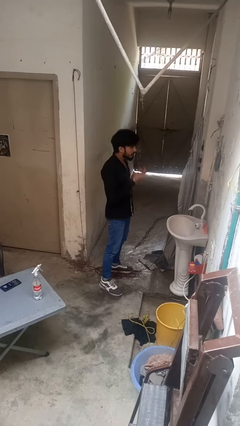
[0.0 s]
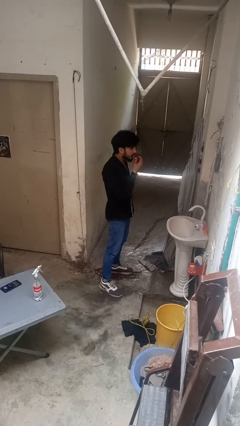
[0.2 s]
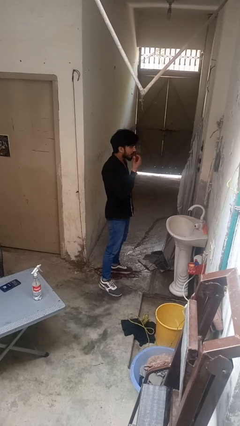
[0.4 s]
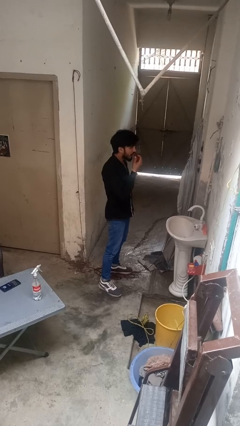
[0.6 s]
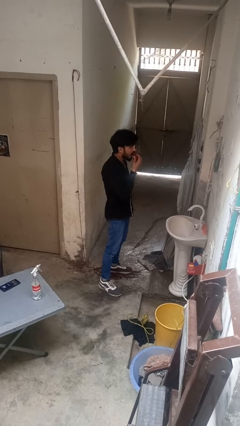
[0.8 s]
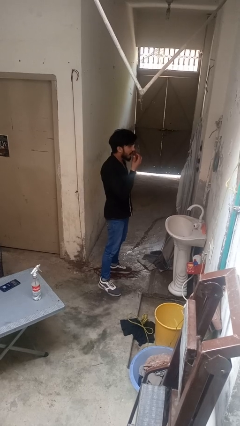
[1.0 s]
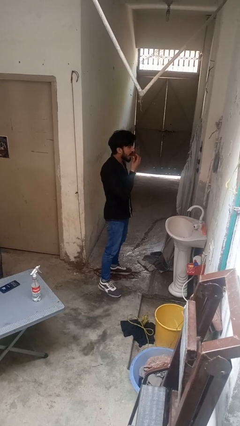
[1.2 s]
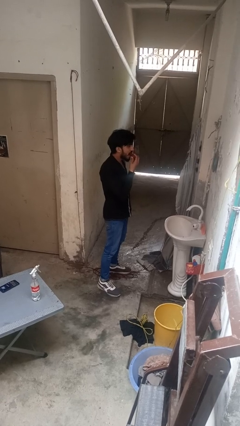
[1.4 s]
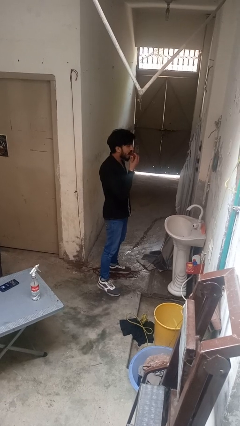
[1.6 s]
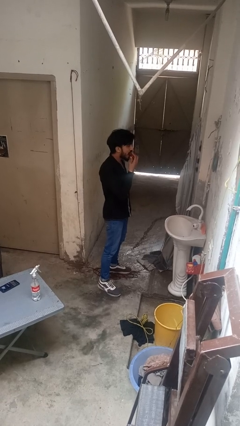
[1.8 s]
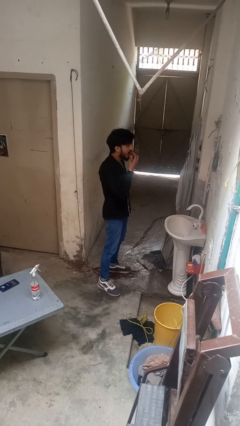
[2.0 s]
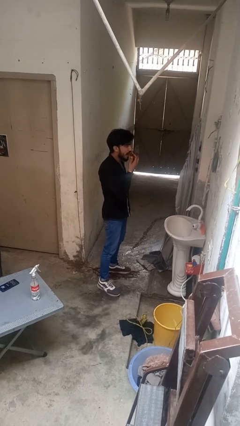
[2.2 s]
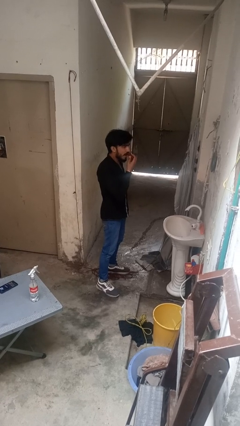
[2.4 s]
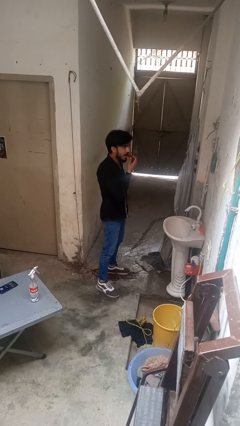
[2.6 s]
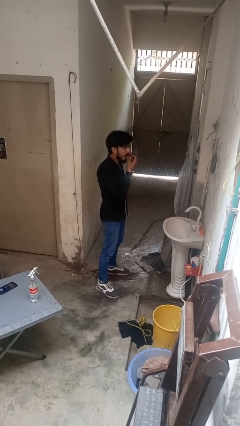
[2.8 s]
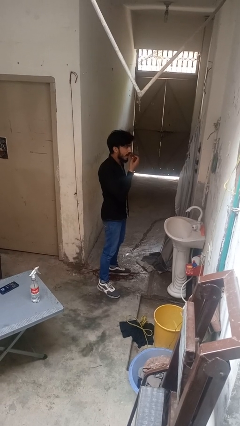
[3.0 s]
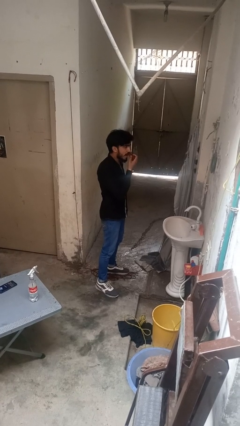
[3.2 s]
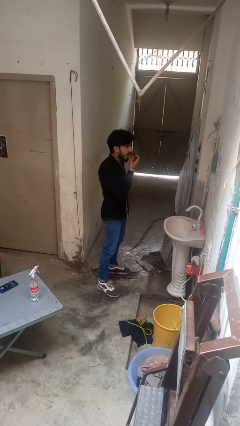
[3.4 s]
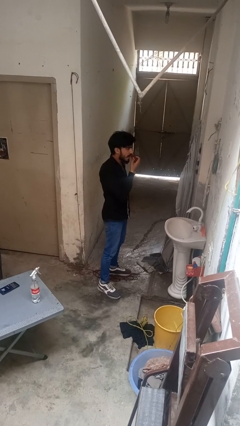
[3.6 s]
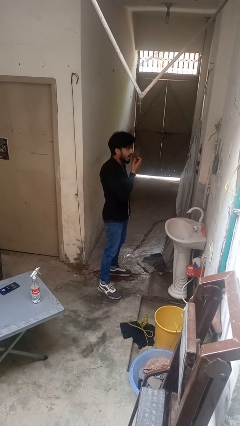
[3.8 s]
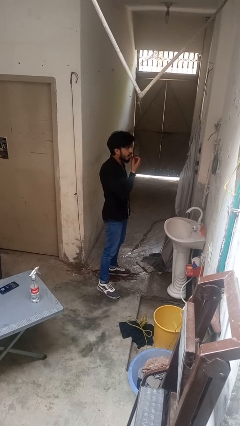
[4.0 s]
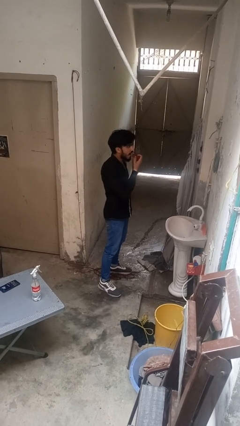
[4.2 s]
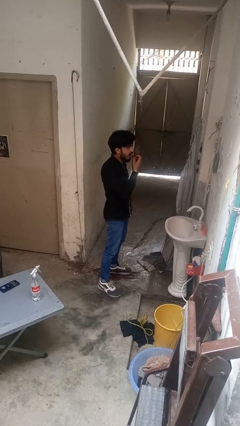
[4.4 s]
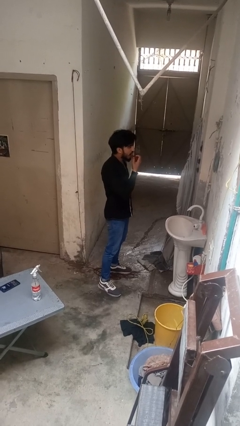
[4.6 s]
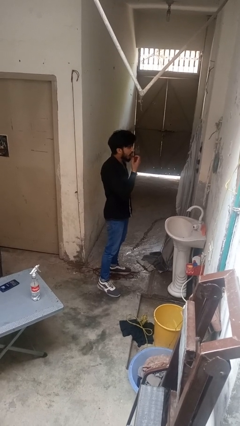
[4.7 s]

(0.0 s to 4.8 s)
person applies lip makeup

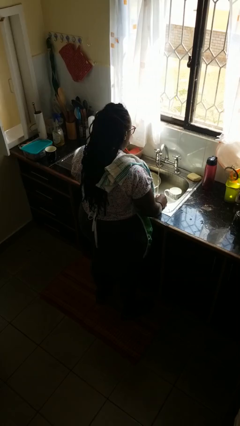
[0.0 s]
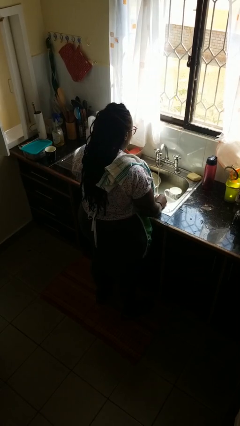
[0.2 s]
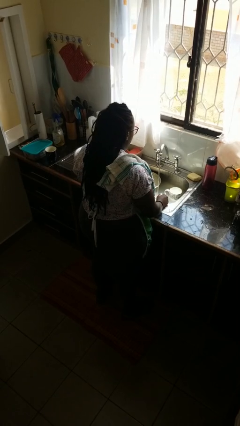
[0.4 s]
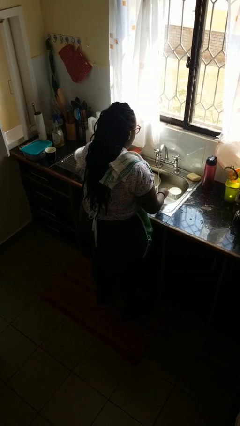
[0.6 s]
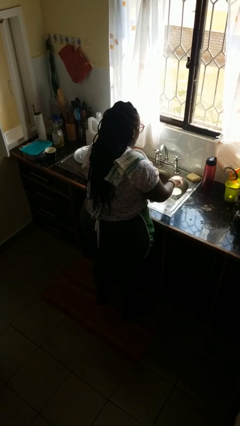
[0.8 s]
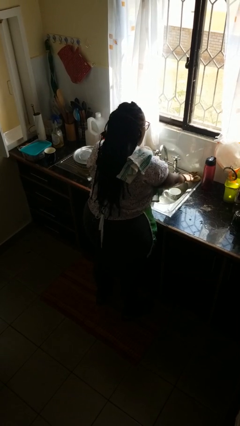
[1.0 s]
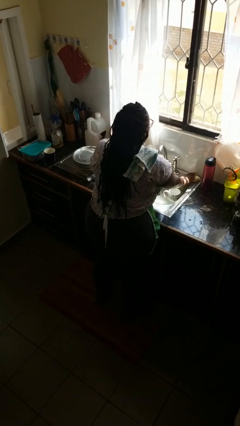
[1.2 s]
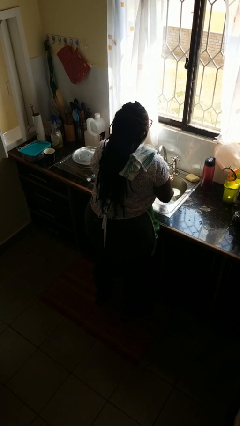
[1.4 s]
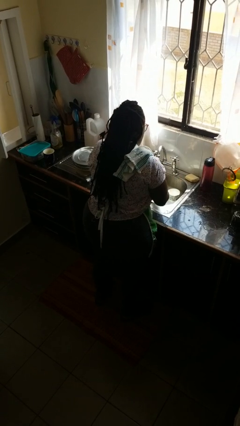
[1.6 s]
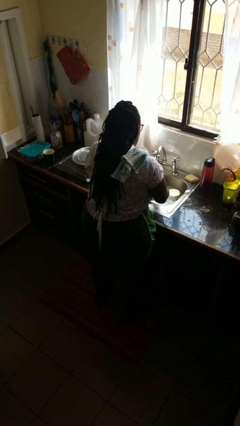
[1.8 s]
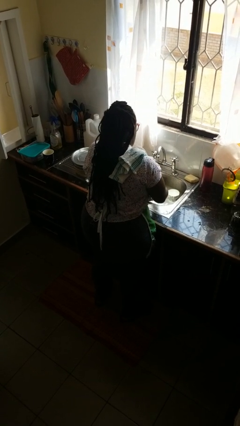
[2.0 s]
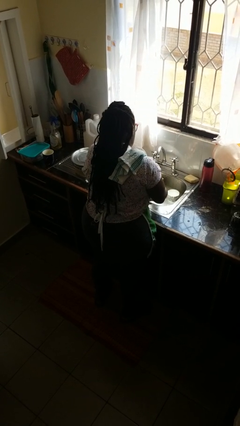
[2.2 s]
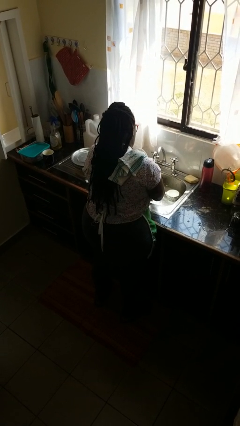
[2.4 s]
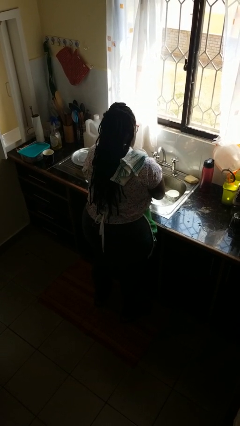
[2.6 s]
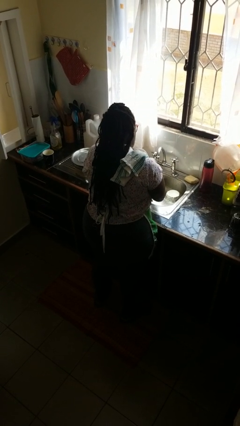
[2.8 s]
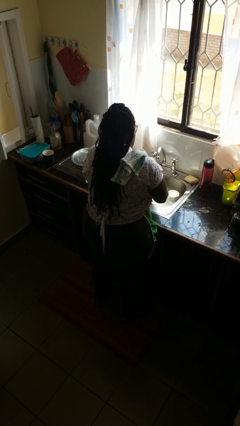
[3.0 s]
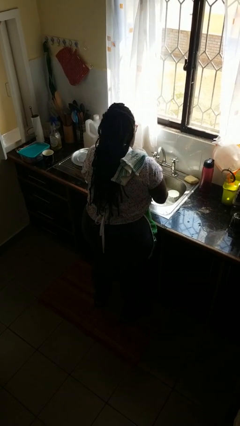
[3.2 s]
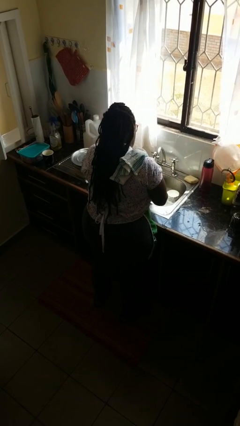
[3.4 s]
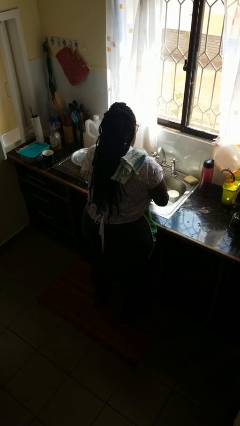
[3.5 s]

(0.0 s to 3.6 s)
person washes hands

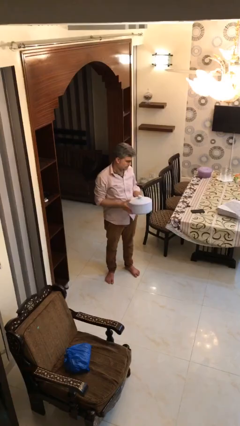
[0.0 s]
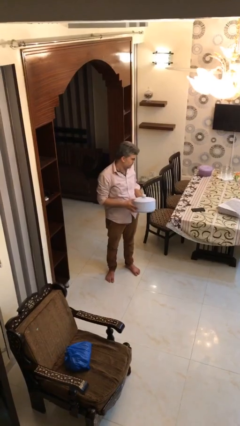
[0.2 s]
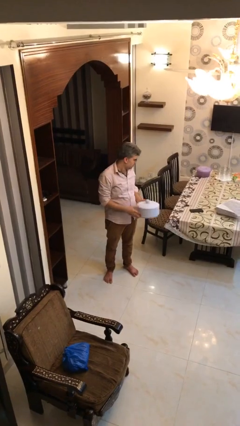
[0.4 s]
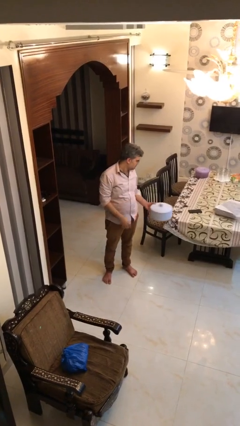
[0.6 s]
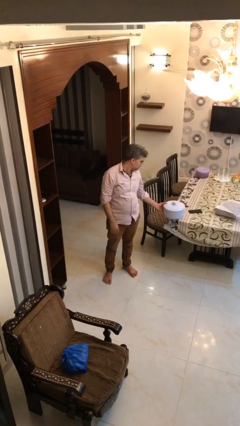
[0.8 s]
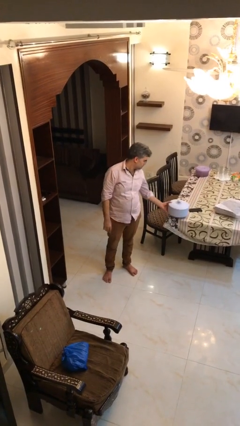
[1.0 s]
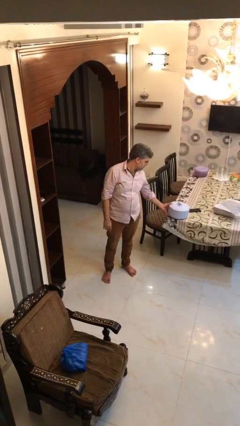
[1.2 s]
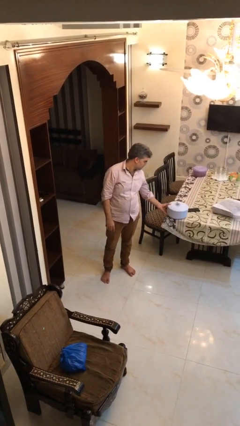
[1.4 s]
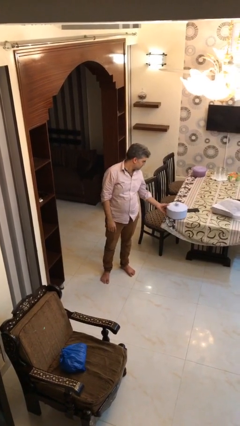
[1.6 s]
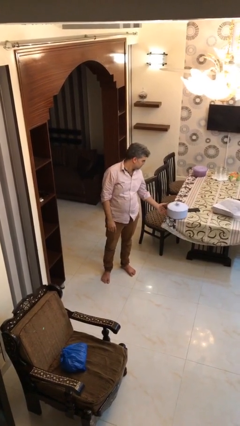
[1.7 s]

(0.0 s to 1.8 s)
person puts down object on table

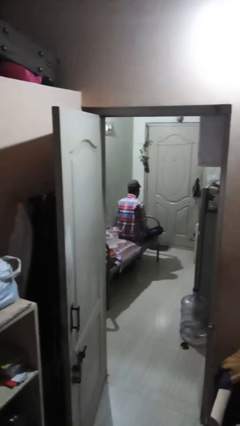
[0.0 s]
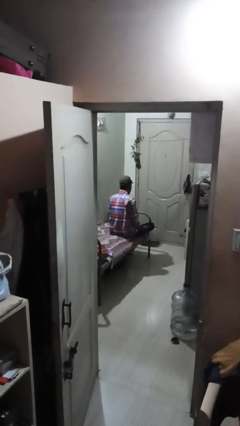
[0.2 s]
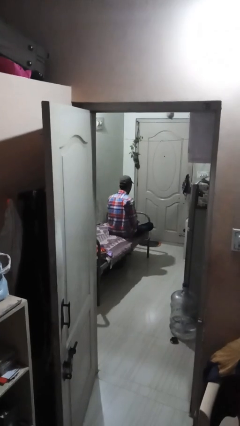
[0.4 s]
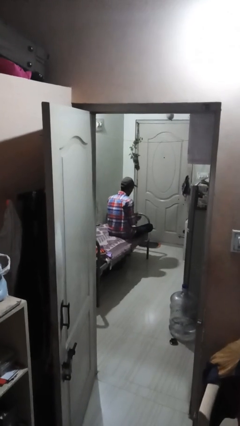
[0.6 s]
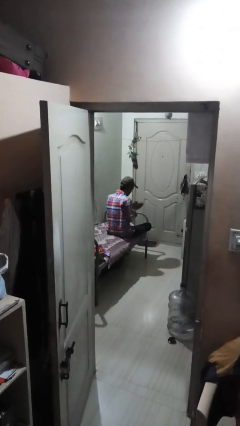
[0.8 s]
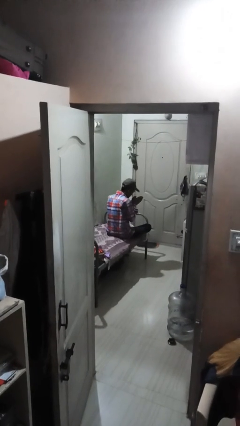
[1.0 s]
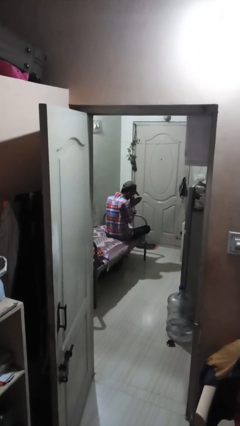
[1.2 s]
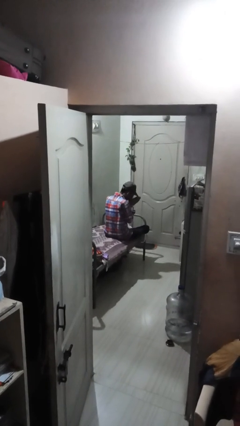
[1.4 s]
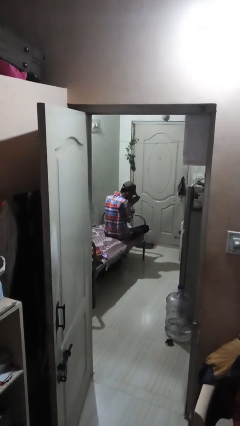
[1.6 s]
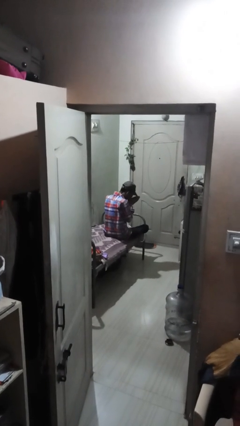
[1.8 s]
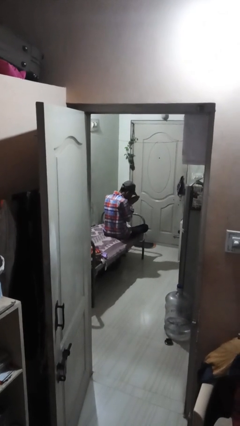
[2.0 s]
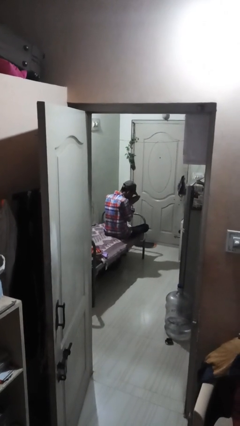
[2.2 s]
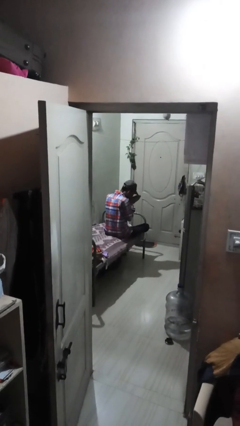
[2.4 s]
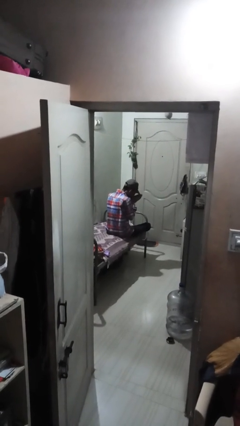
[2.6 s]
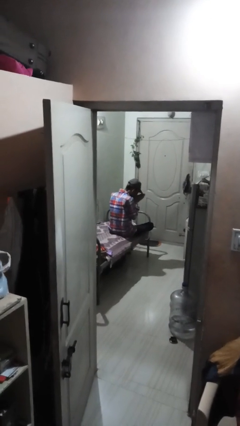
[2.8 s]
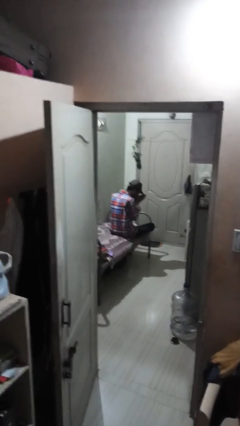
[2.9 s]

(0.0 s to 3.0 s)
person prays

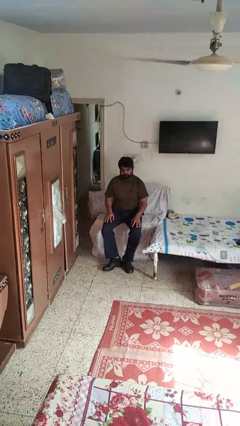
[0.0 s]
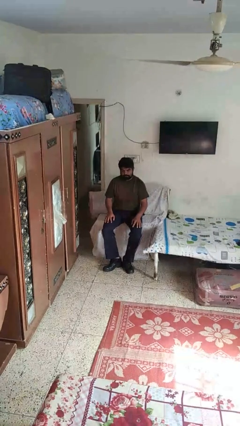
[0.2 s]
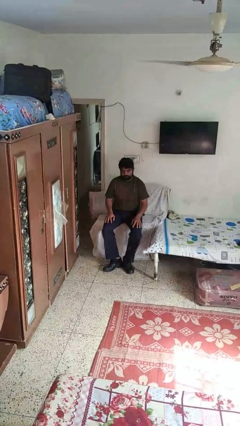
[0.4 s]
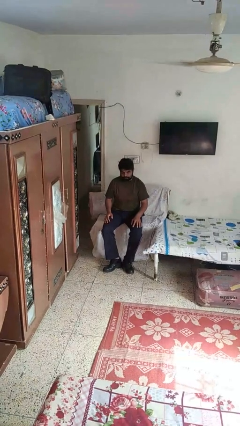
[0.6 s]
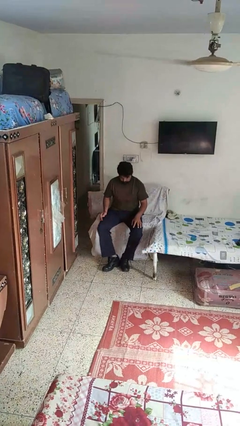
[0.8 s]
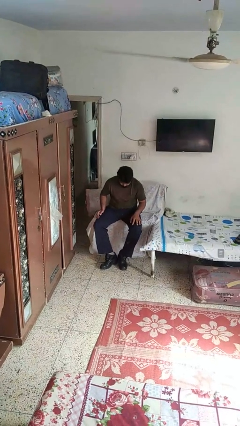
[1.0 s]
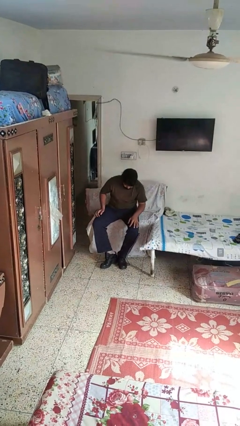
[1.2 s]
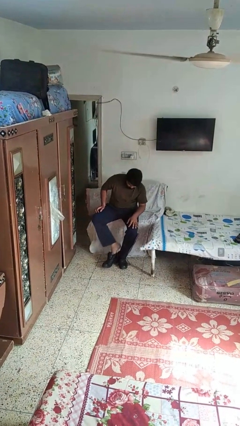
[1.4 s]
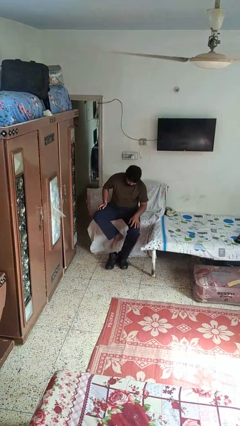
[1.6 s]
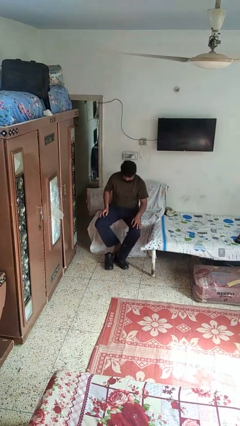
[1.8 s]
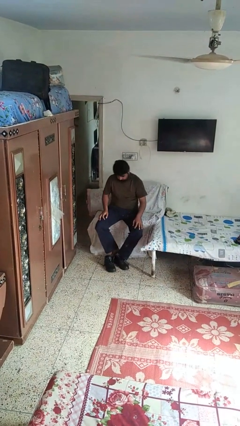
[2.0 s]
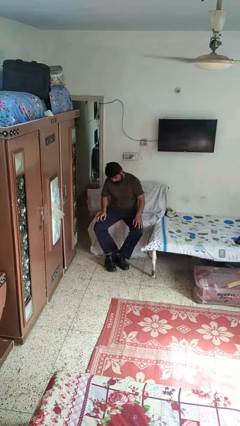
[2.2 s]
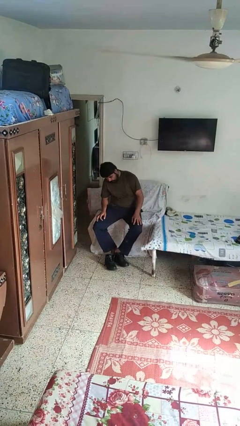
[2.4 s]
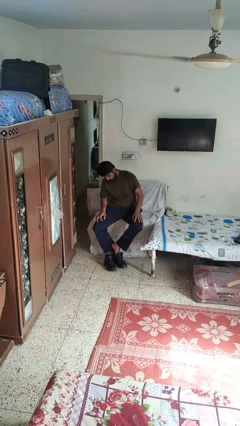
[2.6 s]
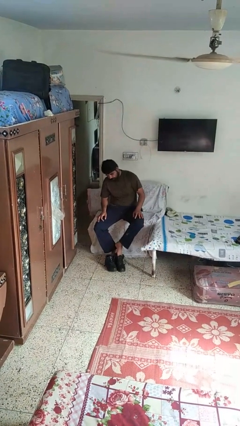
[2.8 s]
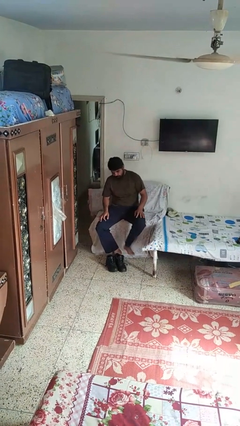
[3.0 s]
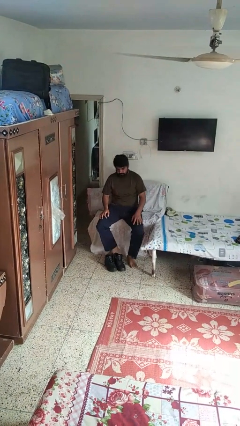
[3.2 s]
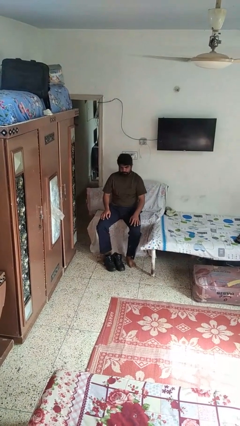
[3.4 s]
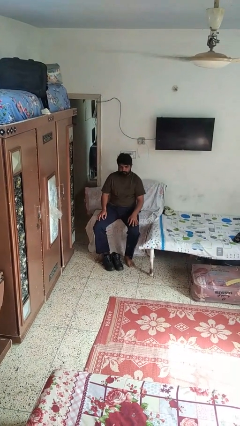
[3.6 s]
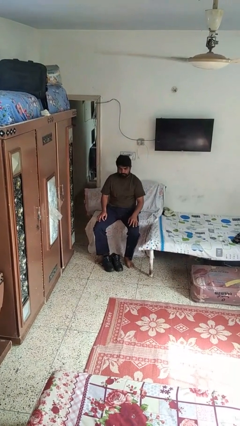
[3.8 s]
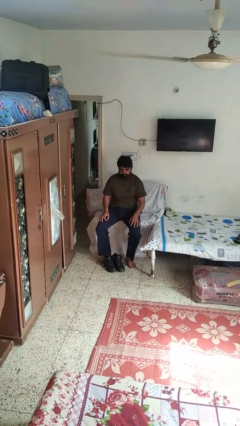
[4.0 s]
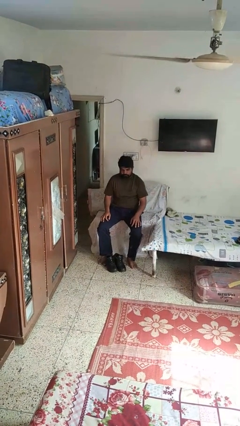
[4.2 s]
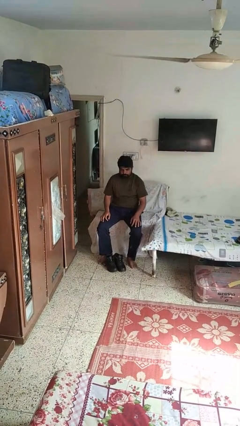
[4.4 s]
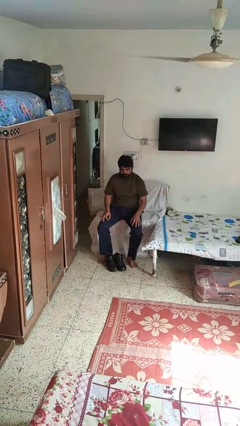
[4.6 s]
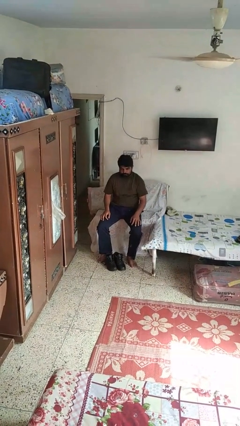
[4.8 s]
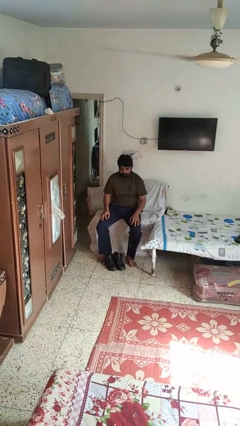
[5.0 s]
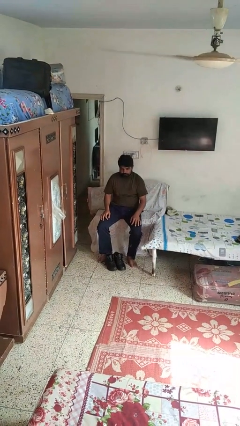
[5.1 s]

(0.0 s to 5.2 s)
person takes off boots
